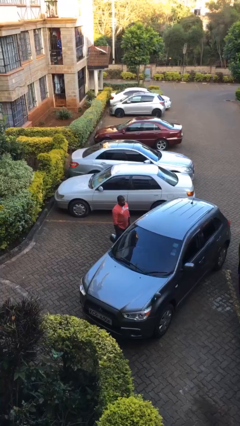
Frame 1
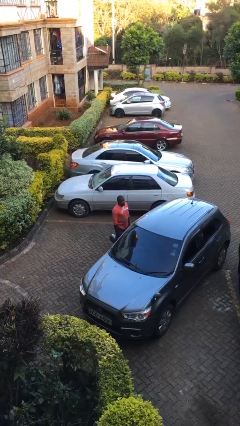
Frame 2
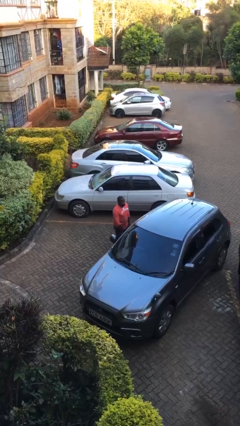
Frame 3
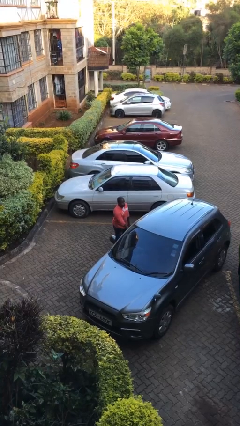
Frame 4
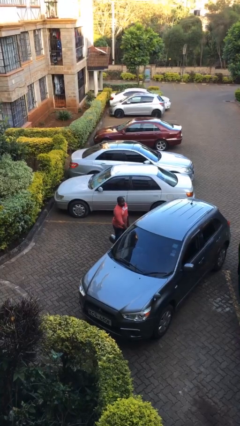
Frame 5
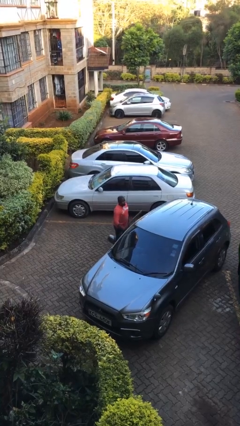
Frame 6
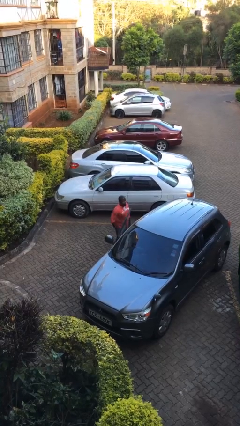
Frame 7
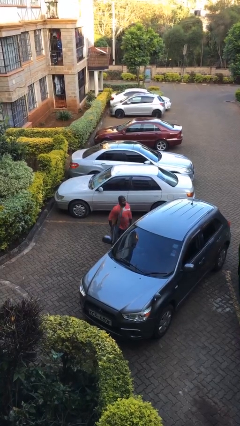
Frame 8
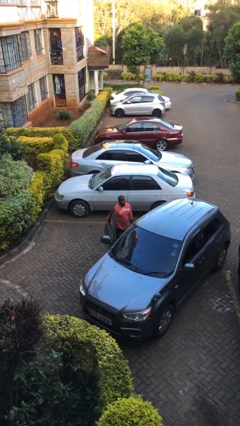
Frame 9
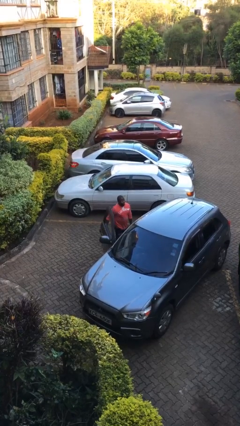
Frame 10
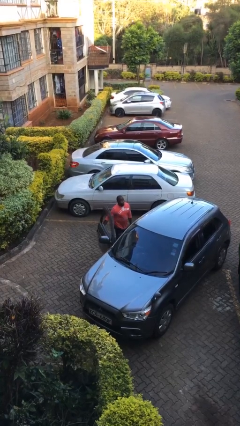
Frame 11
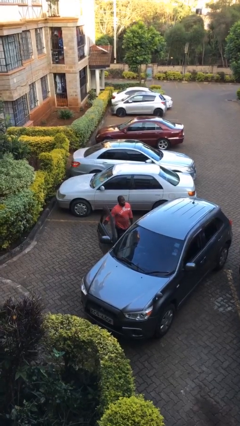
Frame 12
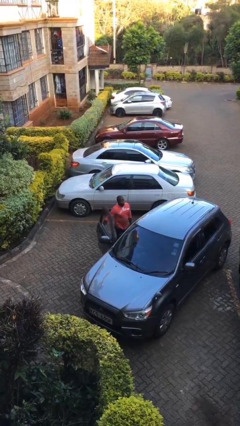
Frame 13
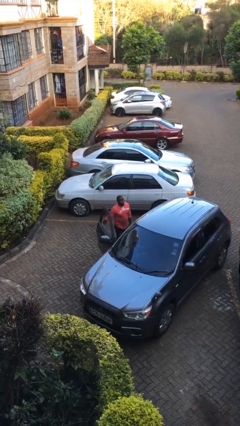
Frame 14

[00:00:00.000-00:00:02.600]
person opens car door

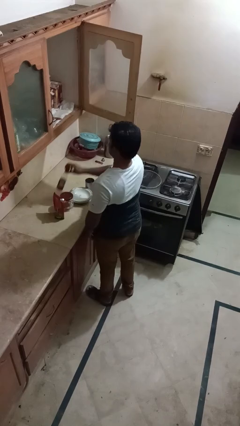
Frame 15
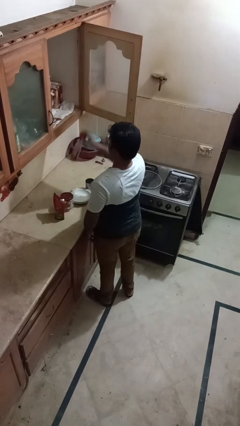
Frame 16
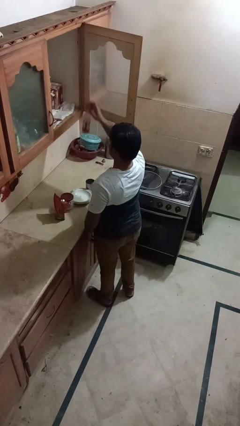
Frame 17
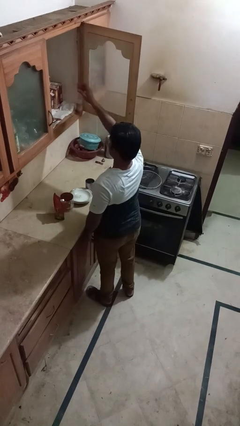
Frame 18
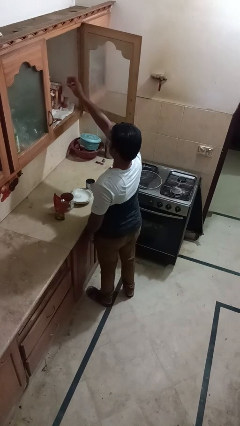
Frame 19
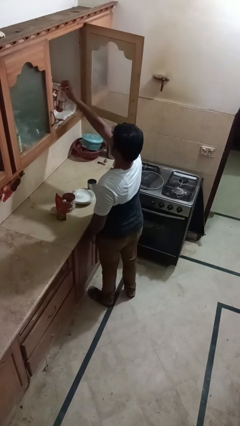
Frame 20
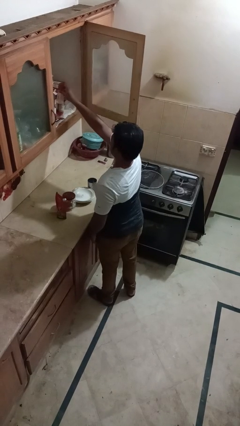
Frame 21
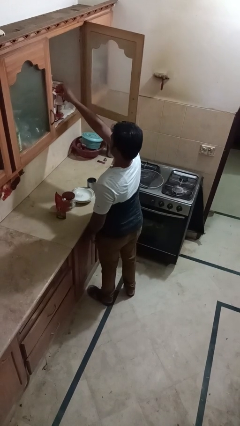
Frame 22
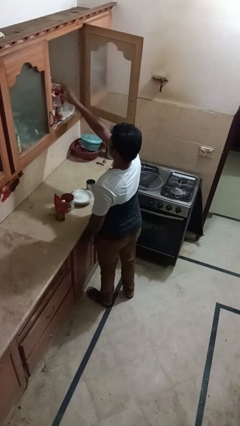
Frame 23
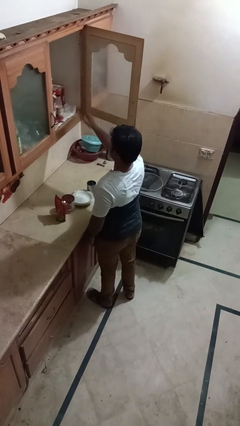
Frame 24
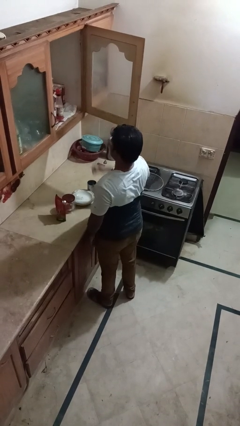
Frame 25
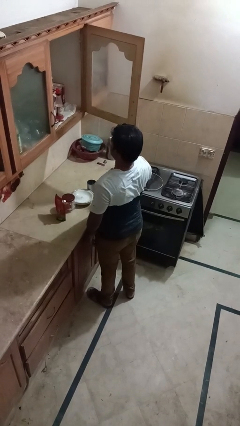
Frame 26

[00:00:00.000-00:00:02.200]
person puts object in cabinet

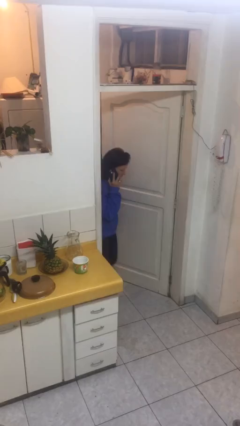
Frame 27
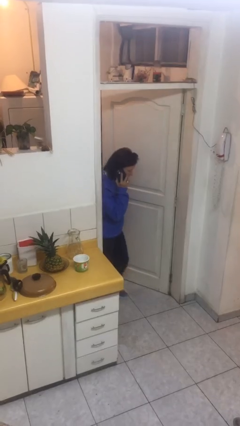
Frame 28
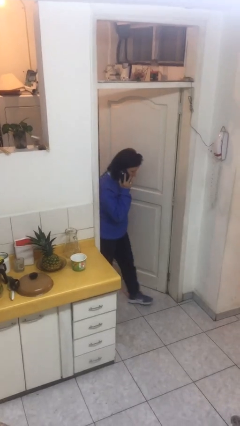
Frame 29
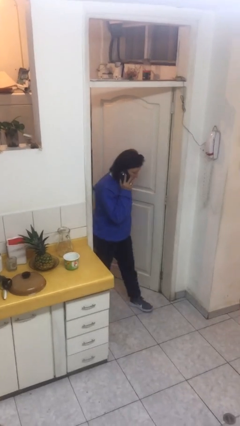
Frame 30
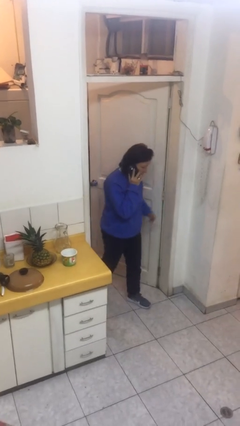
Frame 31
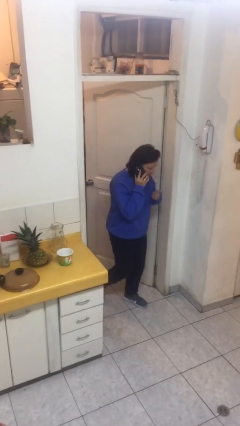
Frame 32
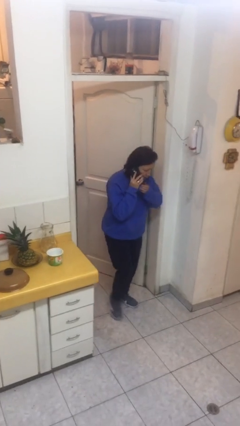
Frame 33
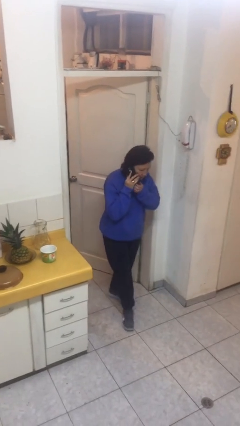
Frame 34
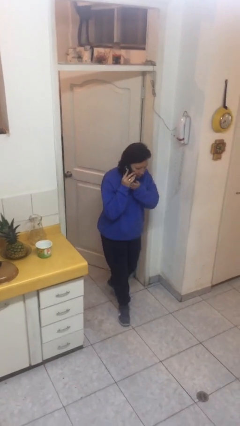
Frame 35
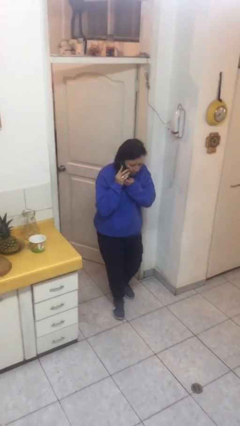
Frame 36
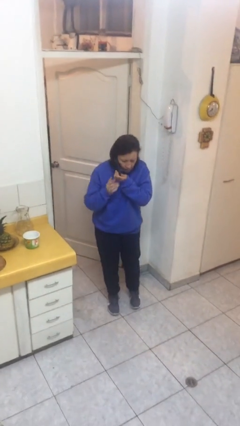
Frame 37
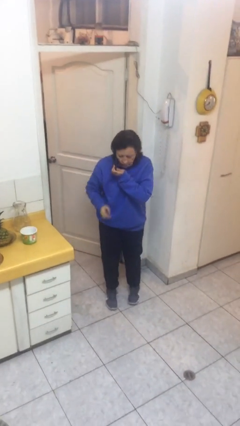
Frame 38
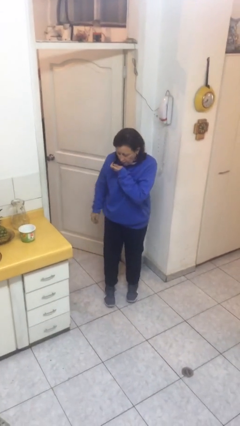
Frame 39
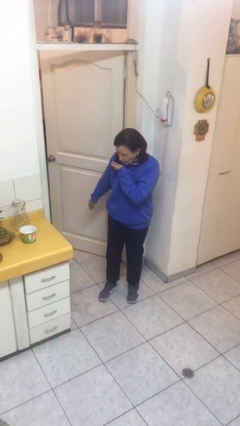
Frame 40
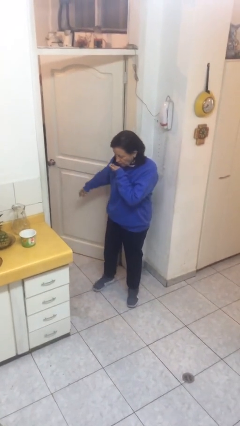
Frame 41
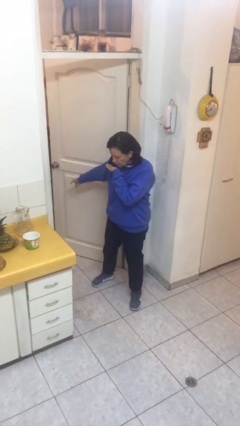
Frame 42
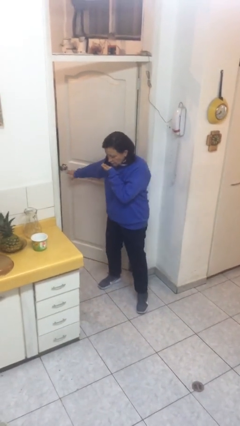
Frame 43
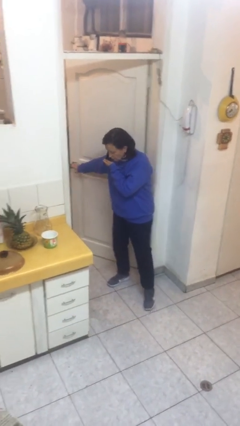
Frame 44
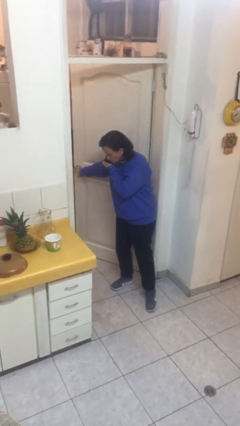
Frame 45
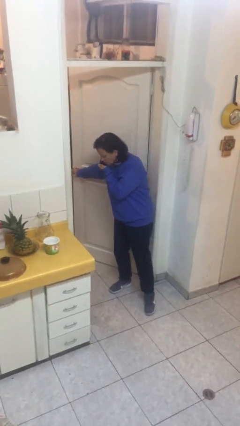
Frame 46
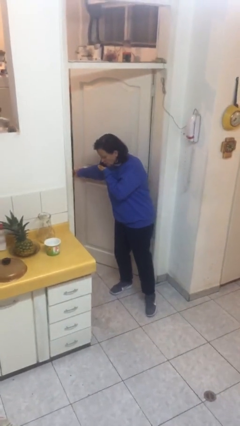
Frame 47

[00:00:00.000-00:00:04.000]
person enters scene through structure

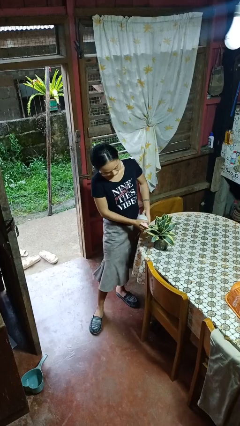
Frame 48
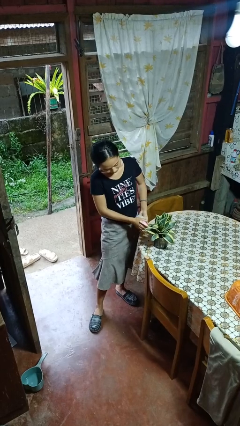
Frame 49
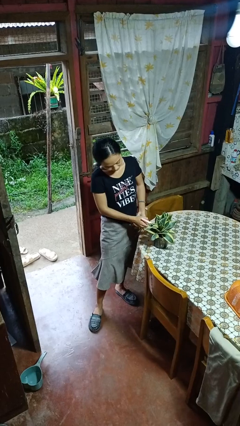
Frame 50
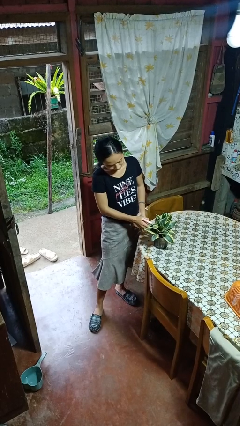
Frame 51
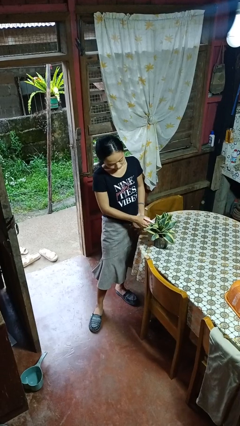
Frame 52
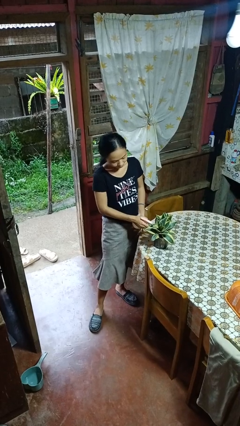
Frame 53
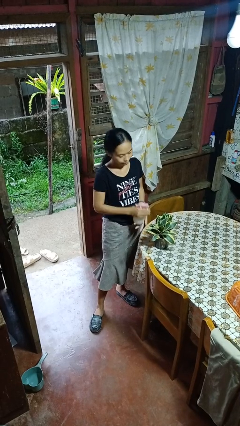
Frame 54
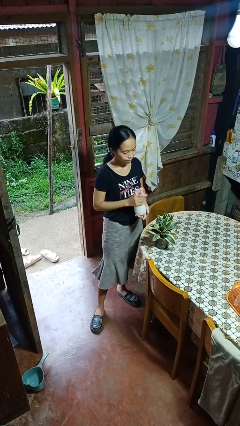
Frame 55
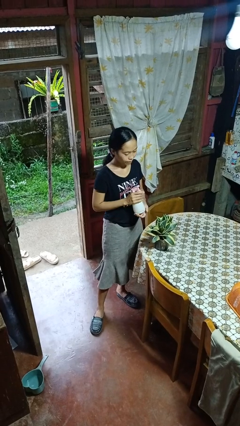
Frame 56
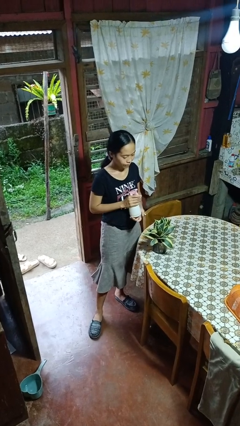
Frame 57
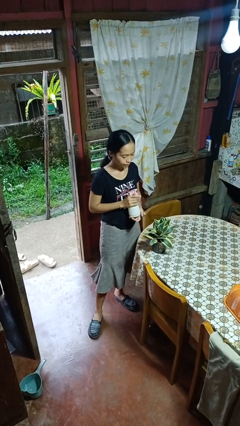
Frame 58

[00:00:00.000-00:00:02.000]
person waters houseplant

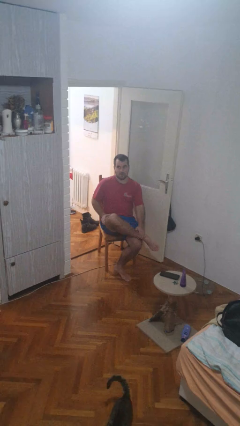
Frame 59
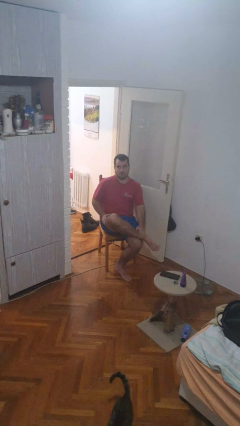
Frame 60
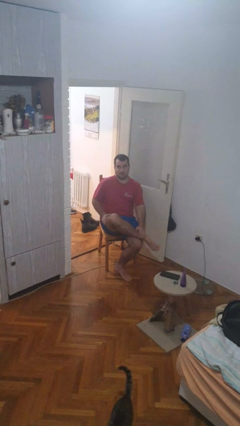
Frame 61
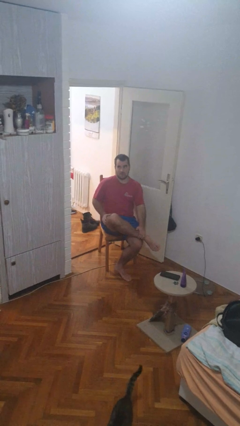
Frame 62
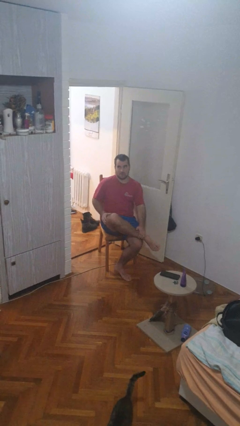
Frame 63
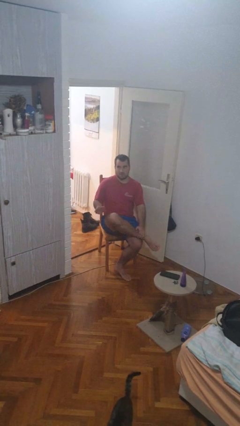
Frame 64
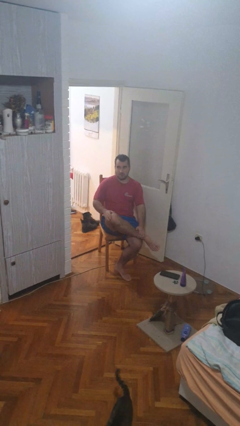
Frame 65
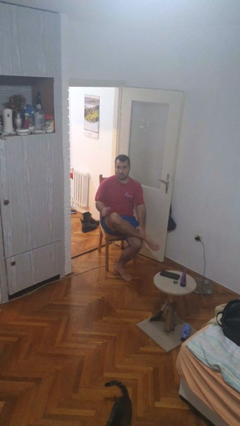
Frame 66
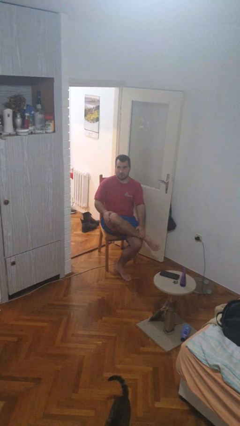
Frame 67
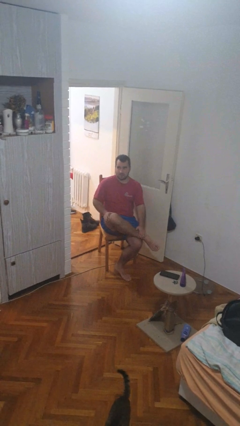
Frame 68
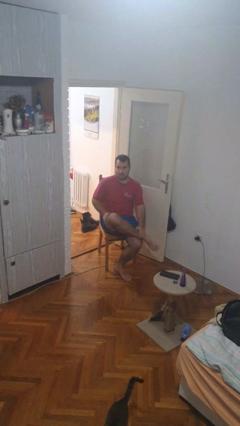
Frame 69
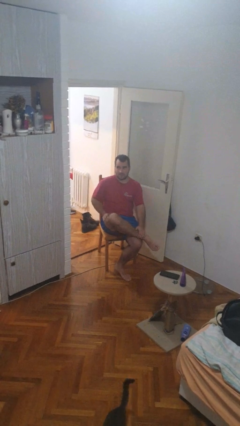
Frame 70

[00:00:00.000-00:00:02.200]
person slaps hands on thighs

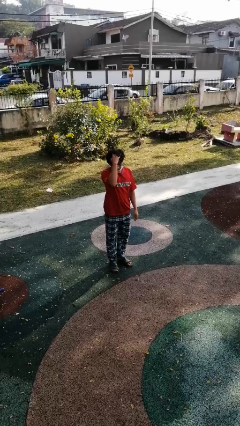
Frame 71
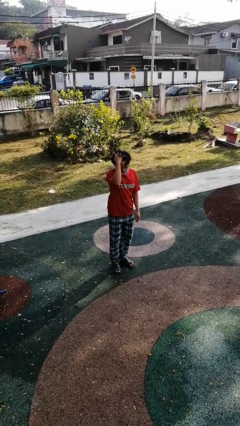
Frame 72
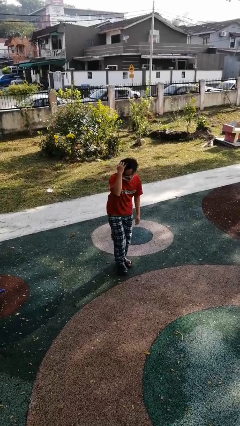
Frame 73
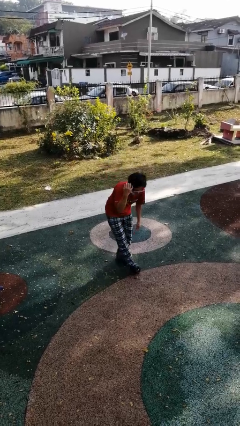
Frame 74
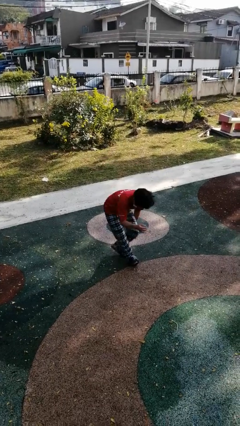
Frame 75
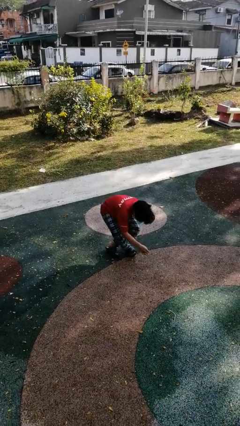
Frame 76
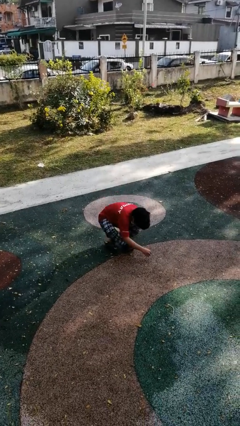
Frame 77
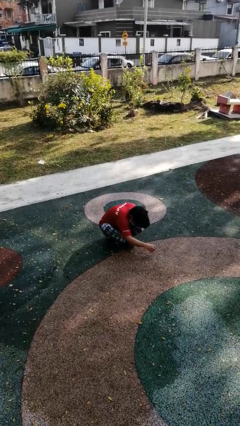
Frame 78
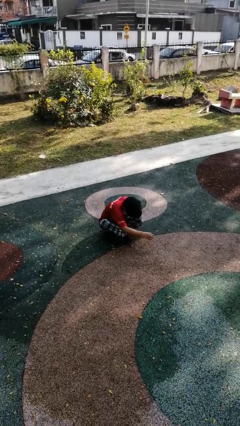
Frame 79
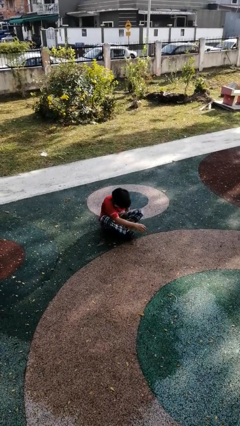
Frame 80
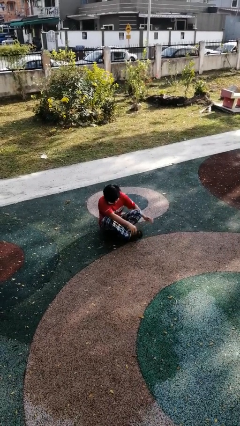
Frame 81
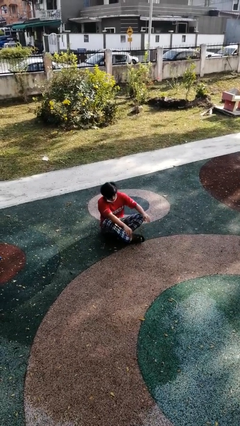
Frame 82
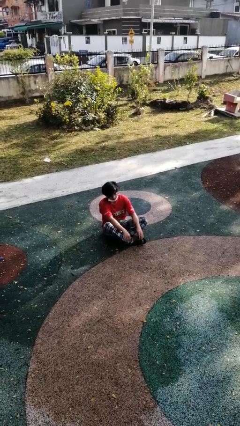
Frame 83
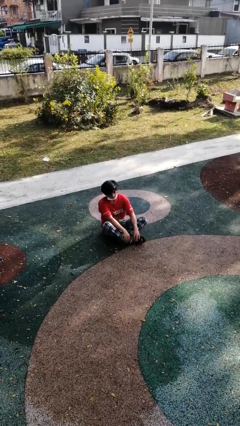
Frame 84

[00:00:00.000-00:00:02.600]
person sits crisscross

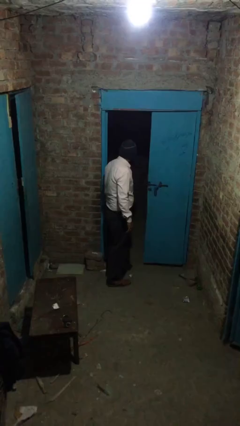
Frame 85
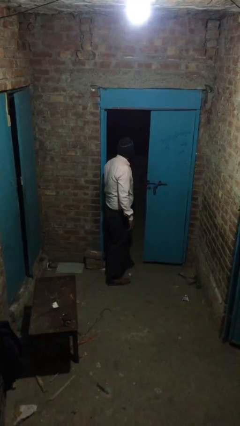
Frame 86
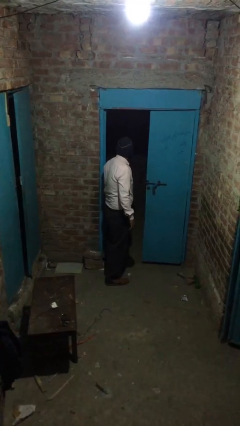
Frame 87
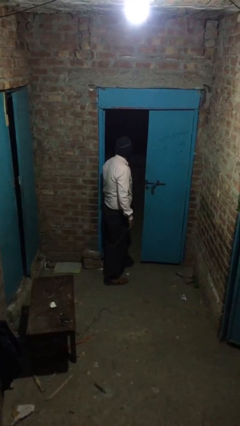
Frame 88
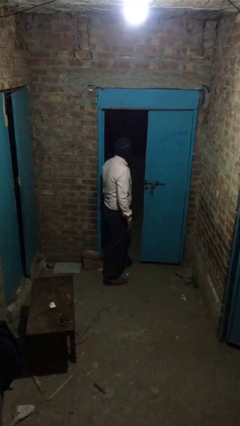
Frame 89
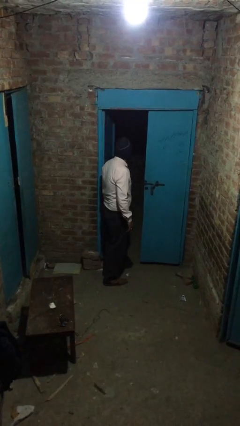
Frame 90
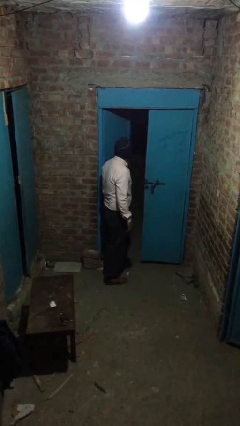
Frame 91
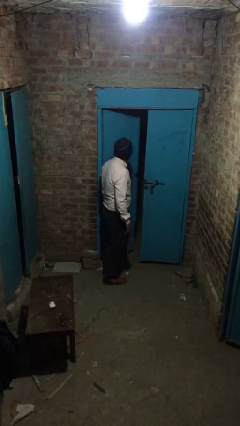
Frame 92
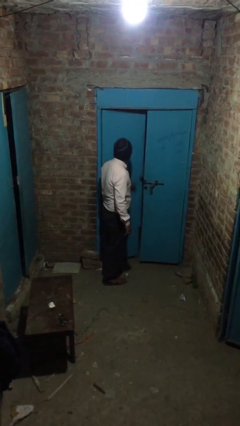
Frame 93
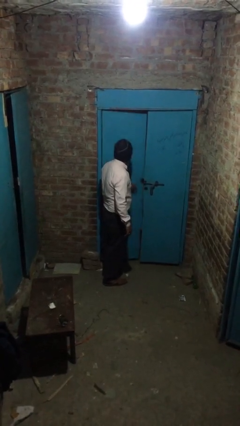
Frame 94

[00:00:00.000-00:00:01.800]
person closes facility door

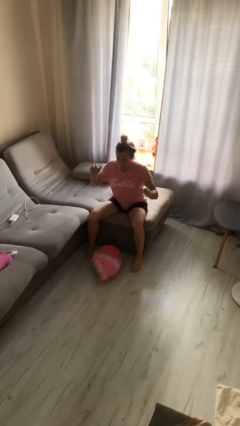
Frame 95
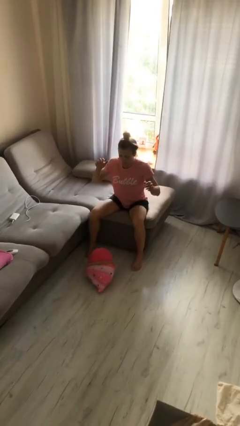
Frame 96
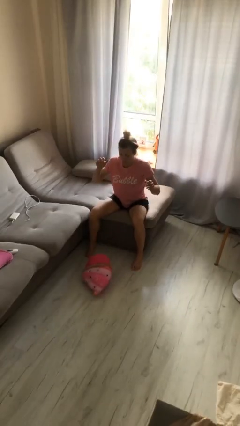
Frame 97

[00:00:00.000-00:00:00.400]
person drops object
